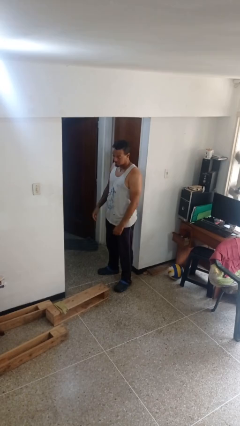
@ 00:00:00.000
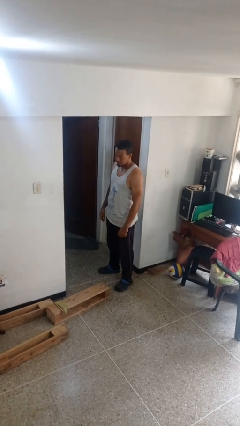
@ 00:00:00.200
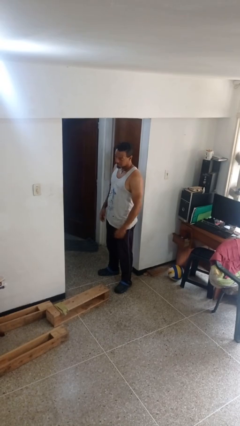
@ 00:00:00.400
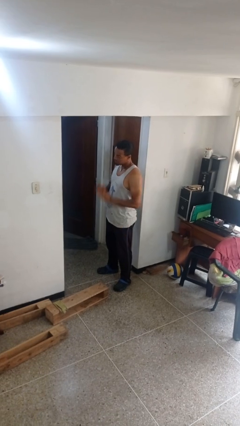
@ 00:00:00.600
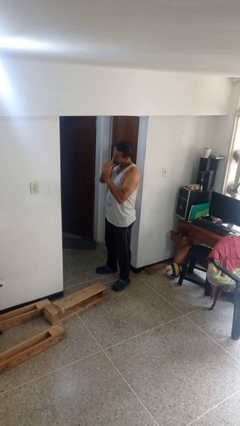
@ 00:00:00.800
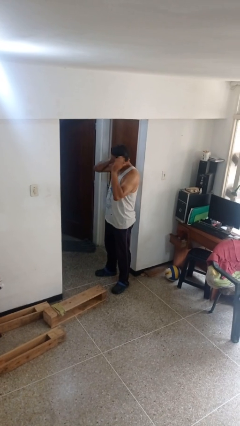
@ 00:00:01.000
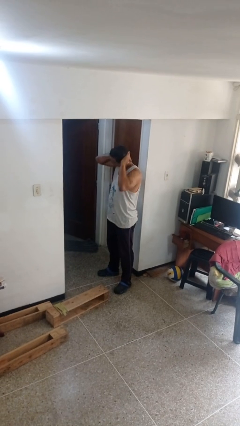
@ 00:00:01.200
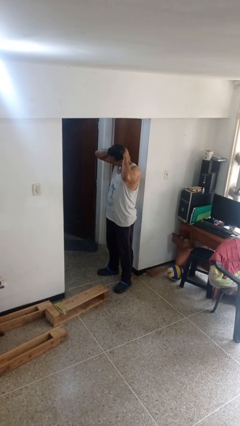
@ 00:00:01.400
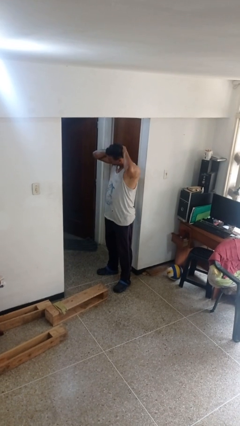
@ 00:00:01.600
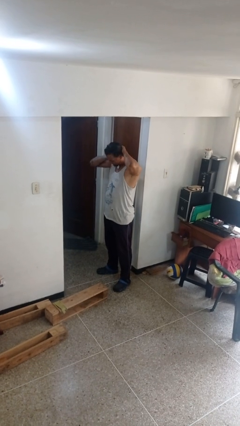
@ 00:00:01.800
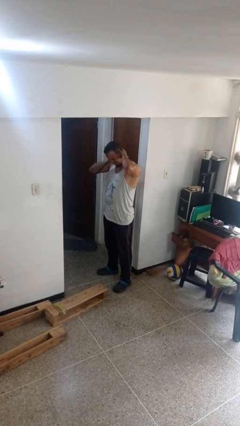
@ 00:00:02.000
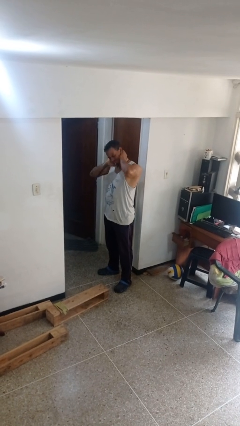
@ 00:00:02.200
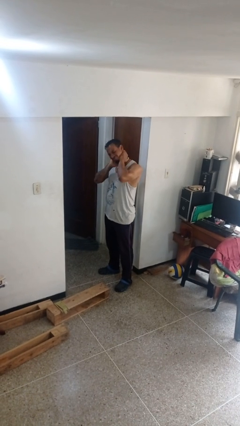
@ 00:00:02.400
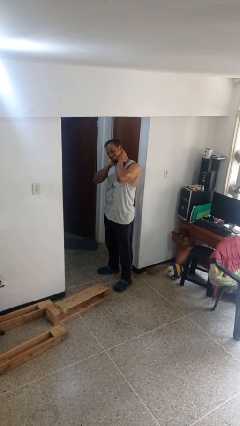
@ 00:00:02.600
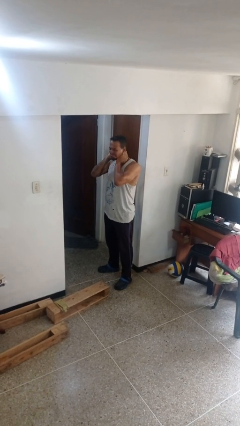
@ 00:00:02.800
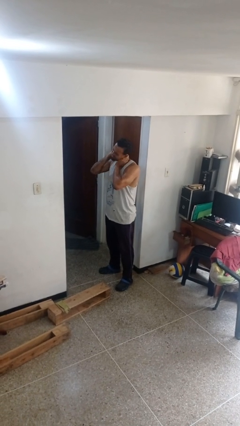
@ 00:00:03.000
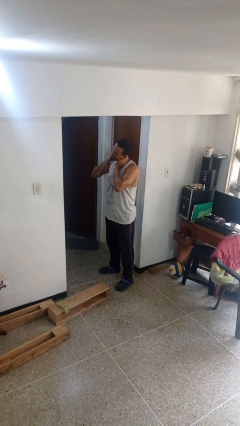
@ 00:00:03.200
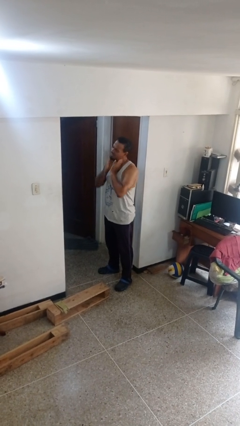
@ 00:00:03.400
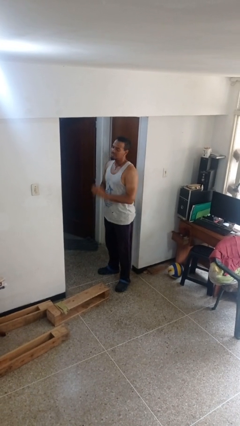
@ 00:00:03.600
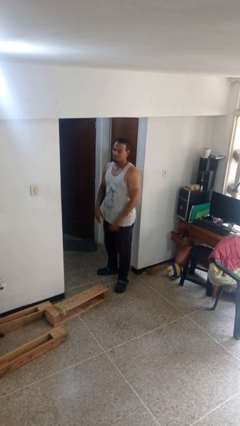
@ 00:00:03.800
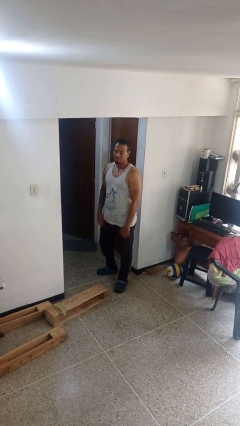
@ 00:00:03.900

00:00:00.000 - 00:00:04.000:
person rubs neck

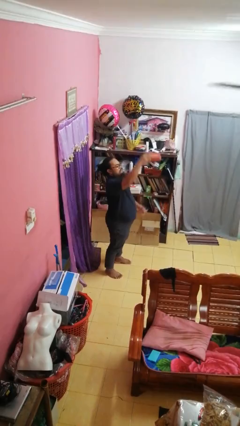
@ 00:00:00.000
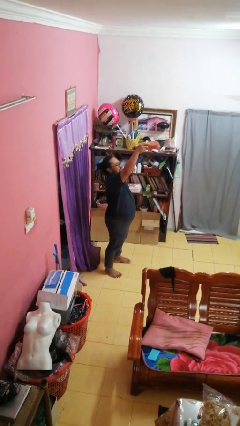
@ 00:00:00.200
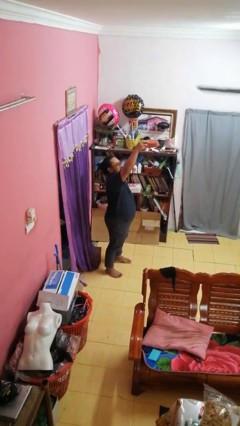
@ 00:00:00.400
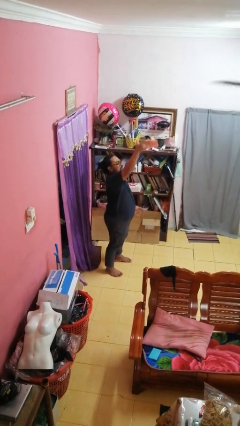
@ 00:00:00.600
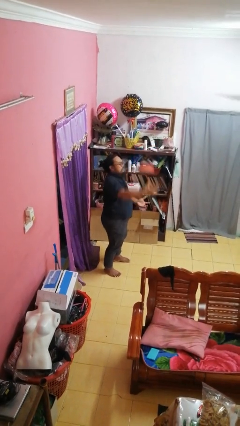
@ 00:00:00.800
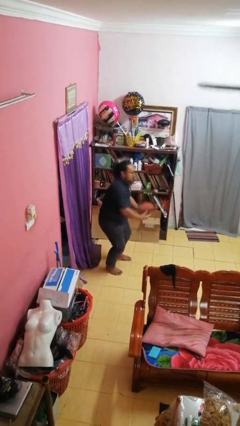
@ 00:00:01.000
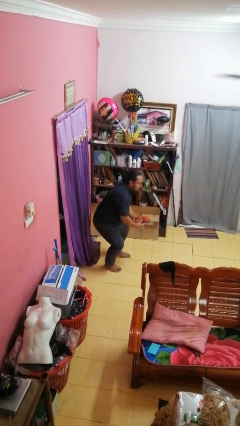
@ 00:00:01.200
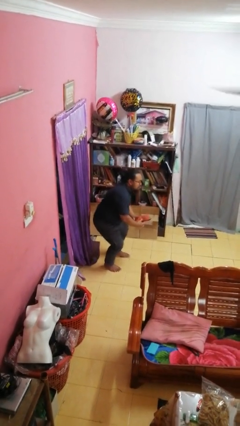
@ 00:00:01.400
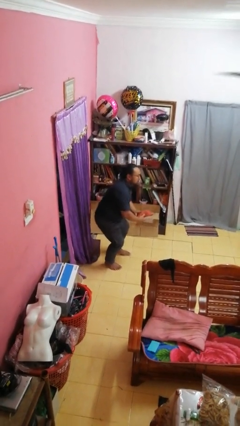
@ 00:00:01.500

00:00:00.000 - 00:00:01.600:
person drops object

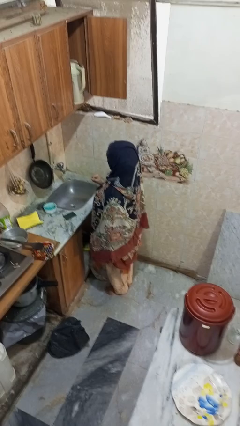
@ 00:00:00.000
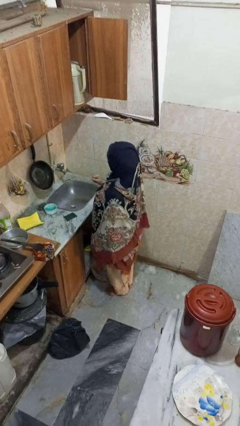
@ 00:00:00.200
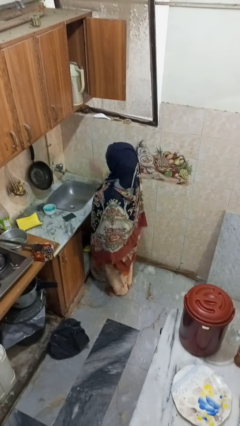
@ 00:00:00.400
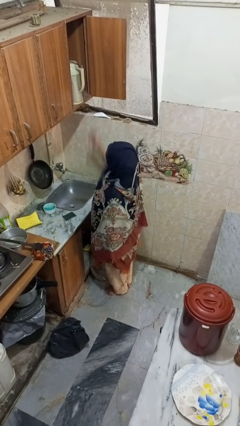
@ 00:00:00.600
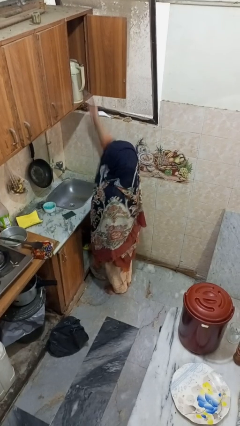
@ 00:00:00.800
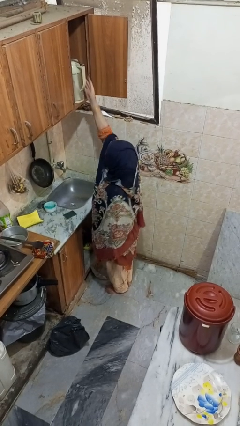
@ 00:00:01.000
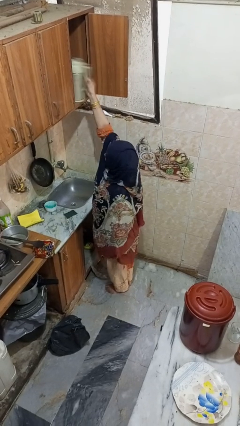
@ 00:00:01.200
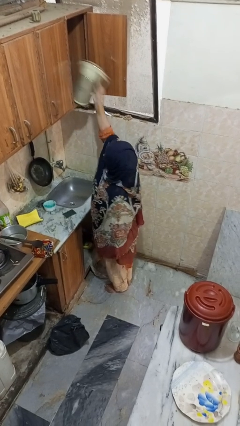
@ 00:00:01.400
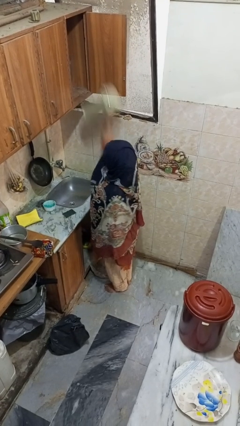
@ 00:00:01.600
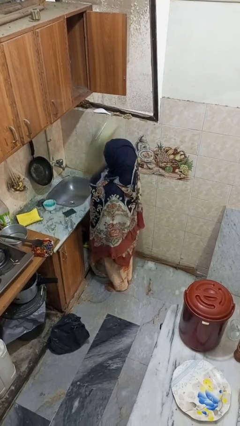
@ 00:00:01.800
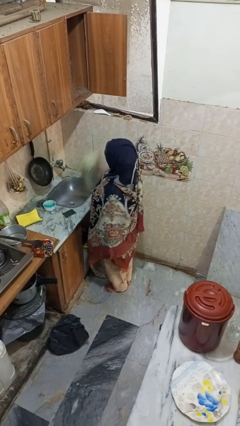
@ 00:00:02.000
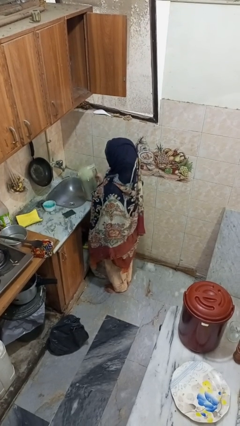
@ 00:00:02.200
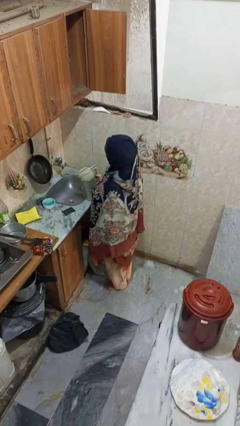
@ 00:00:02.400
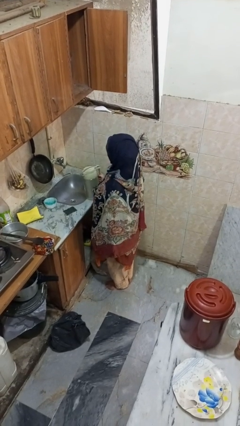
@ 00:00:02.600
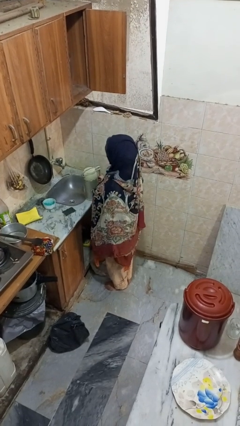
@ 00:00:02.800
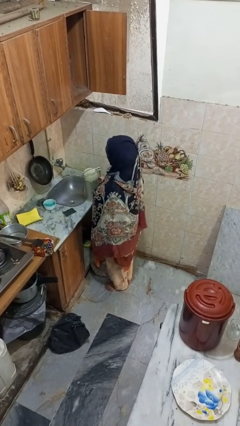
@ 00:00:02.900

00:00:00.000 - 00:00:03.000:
person puts object in cabinet

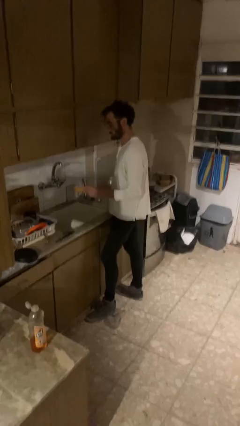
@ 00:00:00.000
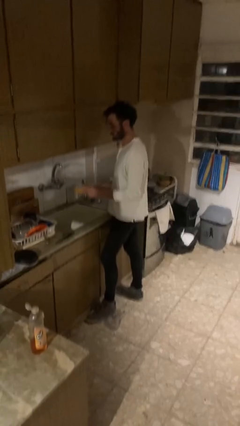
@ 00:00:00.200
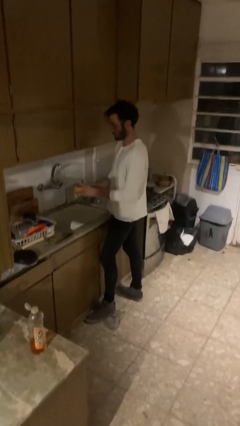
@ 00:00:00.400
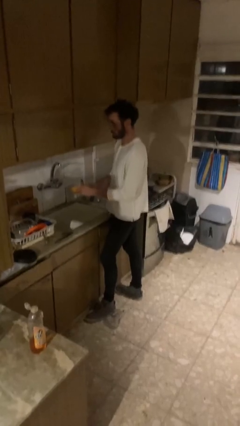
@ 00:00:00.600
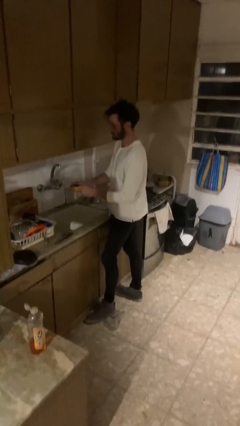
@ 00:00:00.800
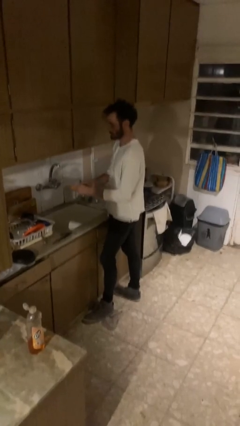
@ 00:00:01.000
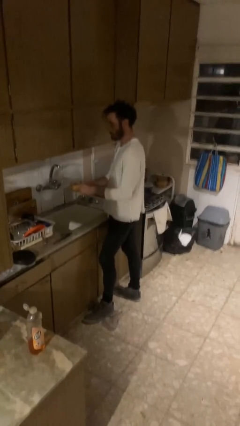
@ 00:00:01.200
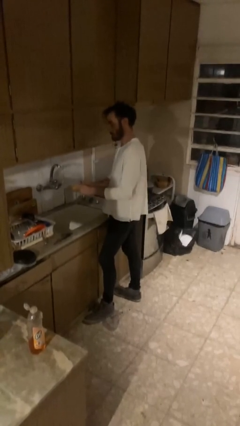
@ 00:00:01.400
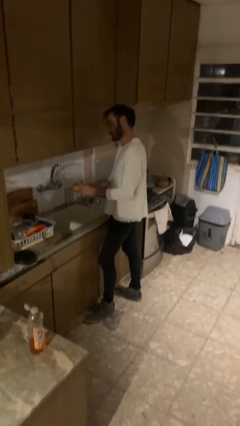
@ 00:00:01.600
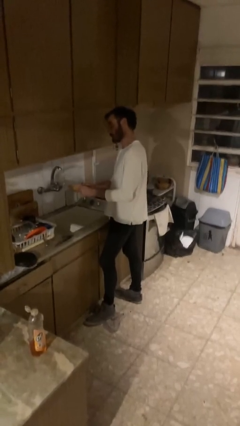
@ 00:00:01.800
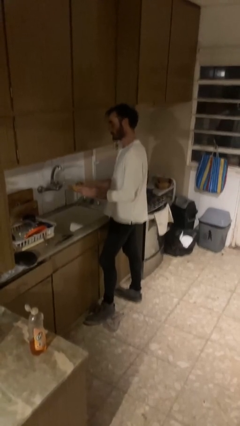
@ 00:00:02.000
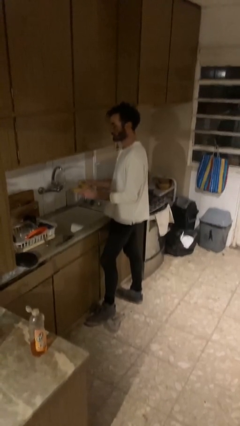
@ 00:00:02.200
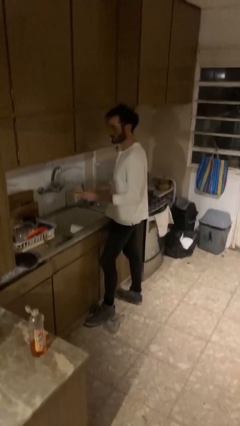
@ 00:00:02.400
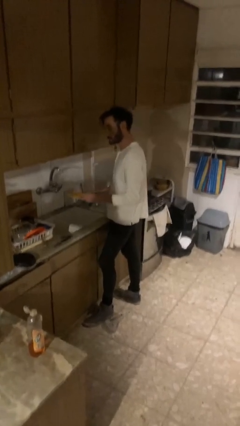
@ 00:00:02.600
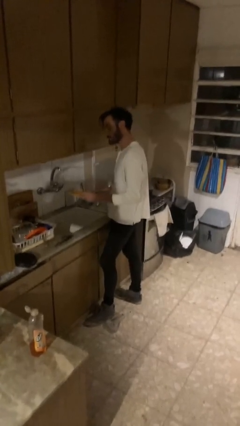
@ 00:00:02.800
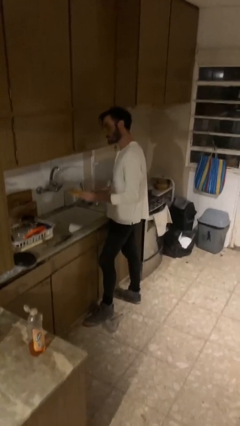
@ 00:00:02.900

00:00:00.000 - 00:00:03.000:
person washes dish

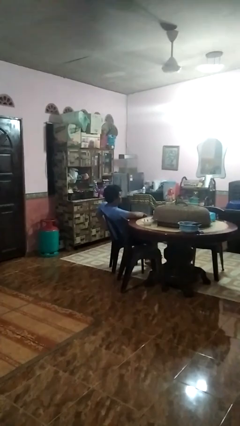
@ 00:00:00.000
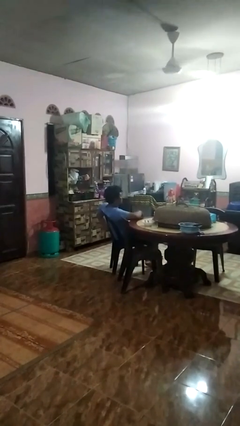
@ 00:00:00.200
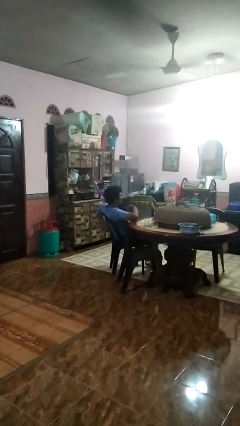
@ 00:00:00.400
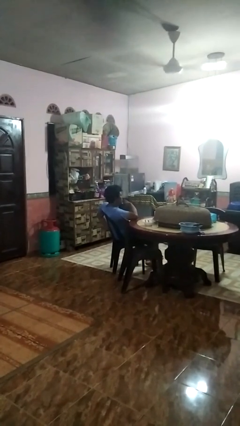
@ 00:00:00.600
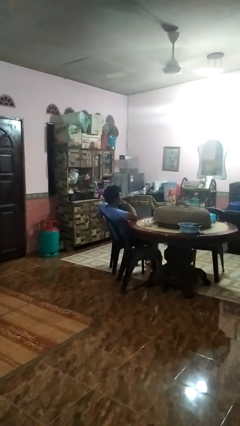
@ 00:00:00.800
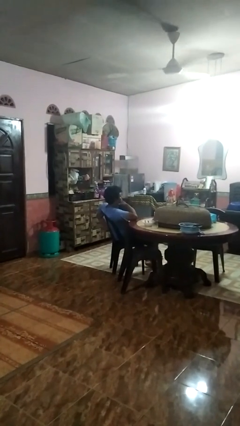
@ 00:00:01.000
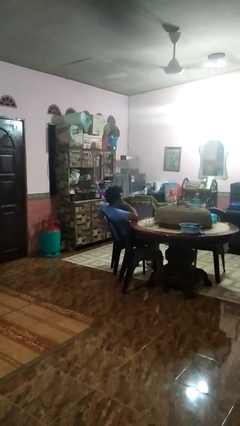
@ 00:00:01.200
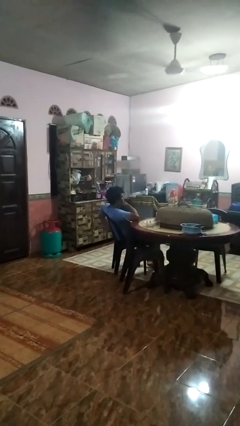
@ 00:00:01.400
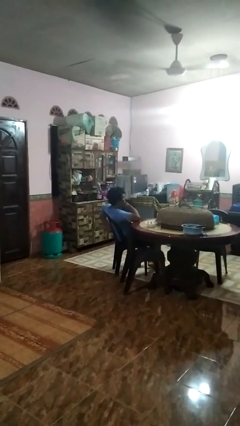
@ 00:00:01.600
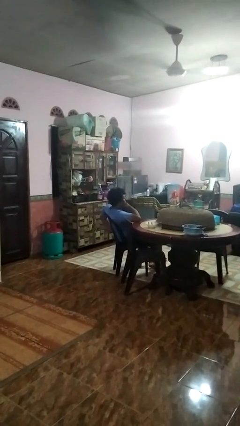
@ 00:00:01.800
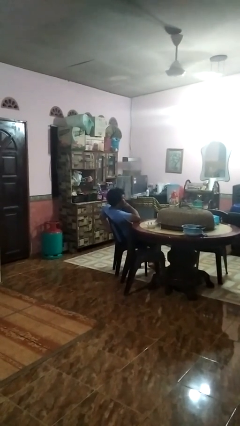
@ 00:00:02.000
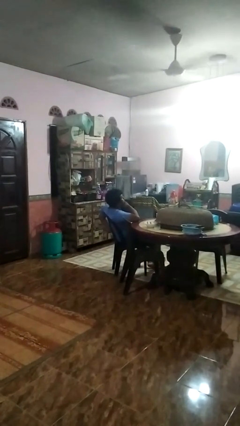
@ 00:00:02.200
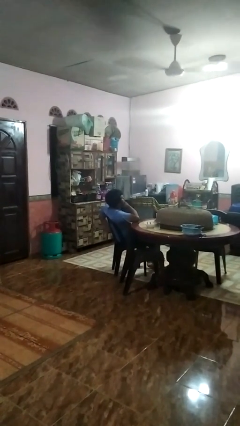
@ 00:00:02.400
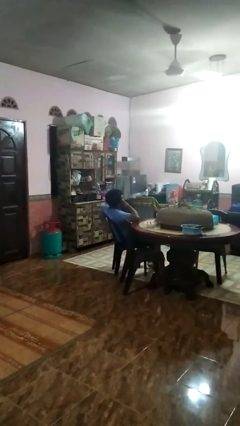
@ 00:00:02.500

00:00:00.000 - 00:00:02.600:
person strokes chin

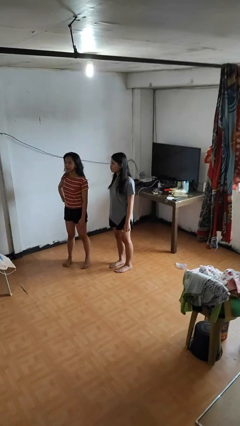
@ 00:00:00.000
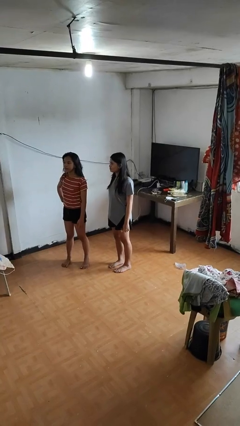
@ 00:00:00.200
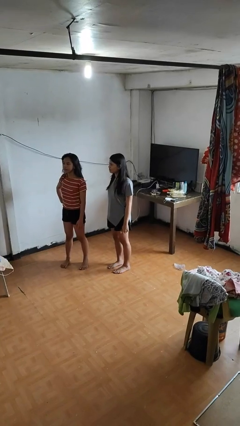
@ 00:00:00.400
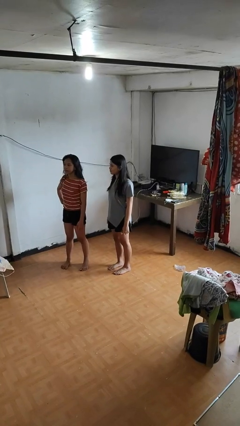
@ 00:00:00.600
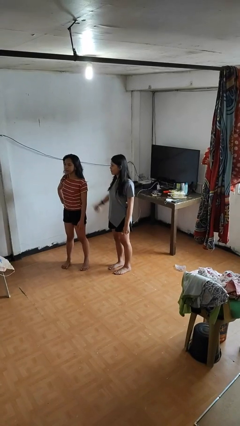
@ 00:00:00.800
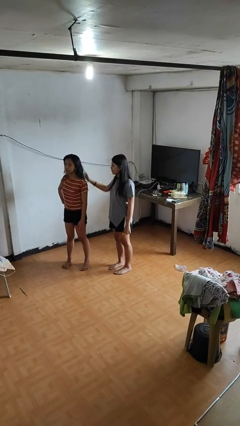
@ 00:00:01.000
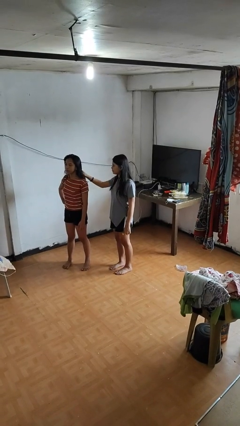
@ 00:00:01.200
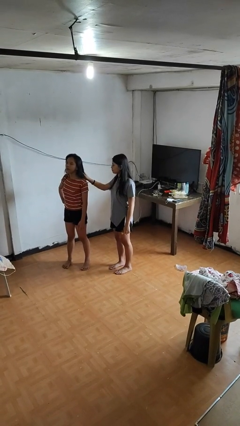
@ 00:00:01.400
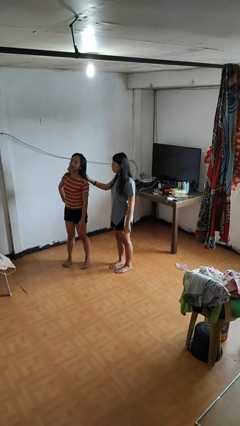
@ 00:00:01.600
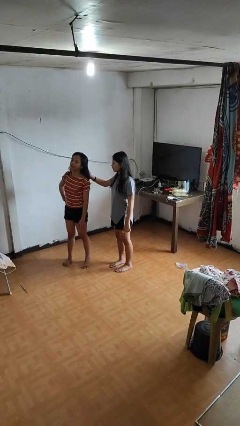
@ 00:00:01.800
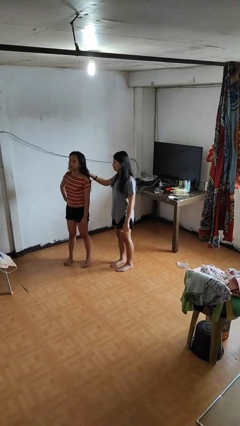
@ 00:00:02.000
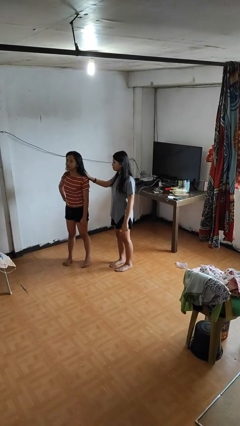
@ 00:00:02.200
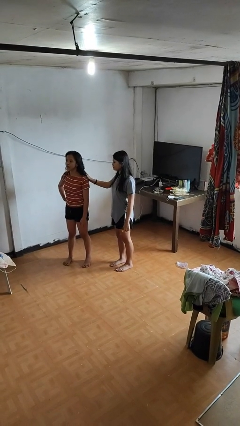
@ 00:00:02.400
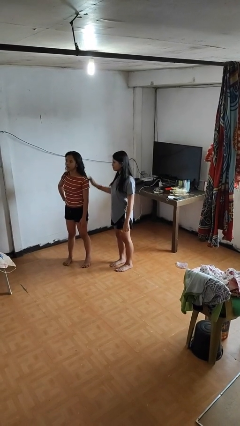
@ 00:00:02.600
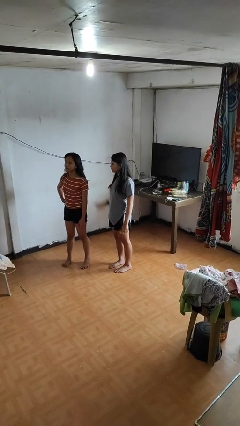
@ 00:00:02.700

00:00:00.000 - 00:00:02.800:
person grabs person by hair
